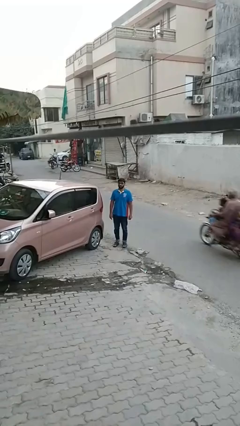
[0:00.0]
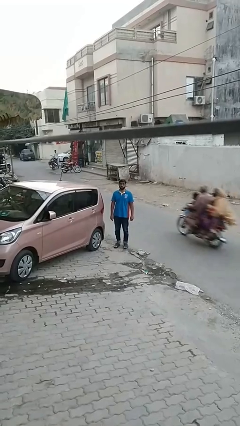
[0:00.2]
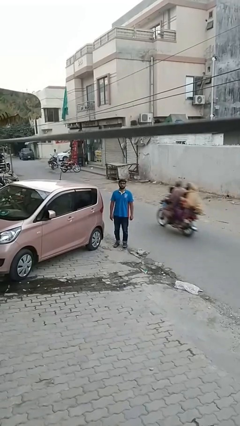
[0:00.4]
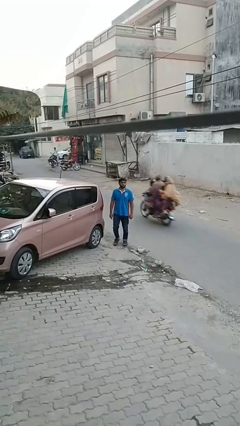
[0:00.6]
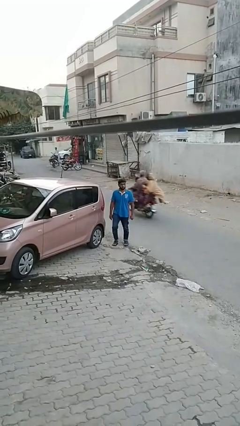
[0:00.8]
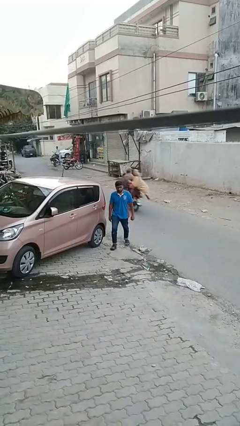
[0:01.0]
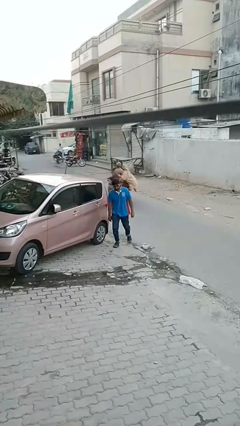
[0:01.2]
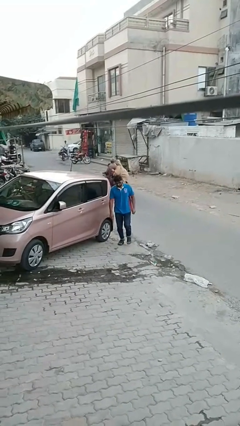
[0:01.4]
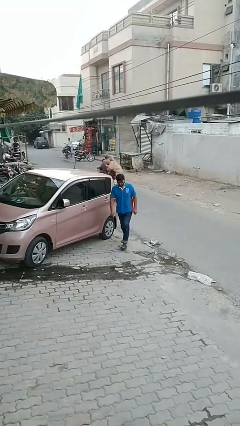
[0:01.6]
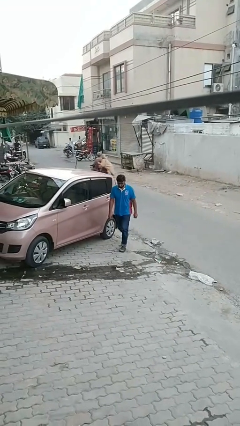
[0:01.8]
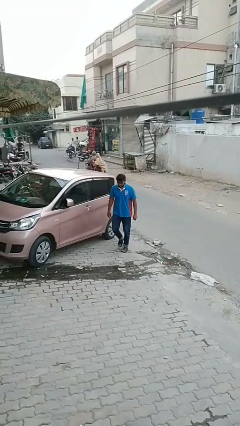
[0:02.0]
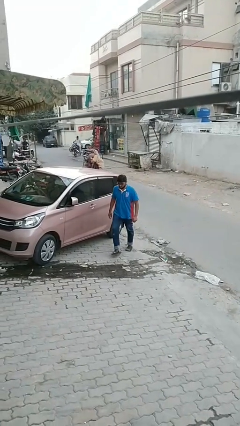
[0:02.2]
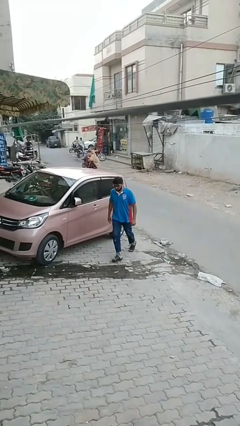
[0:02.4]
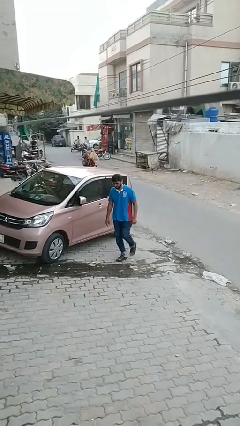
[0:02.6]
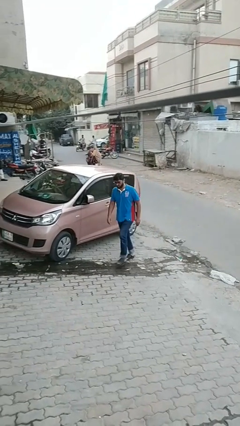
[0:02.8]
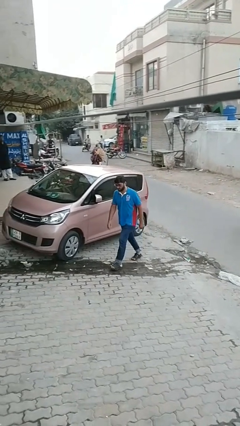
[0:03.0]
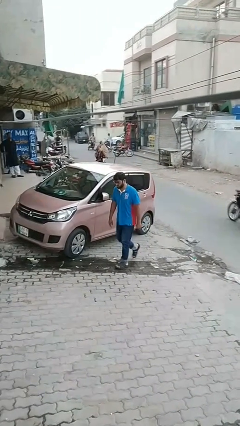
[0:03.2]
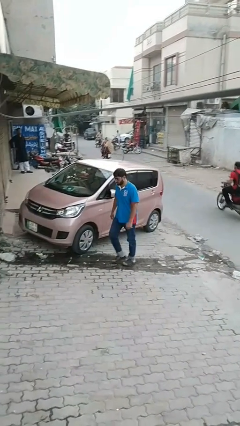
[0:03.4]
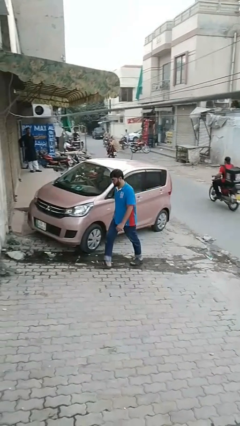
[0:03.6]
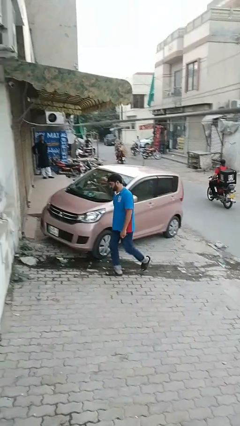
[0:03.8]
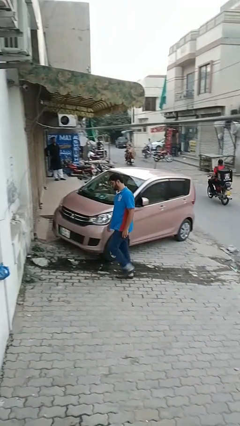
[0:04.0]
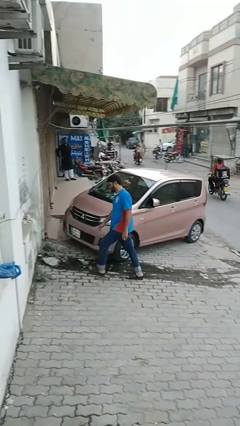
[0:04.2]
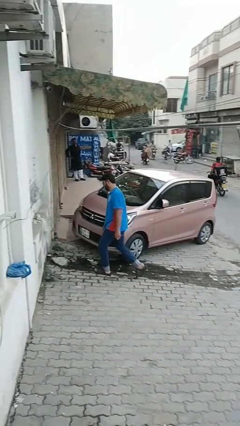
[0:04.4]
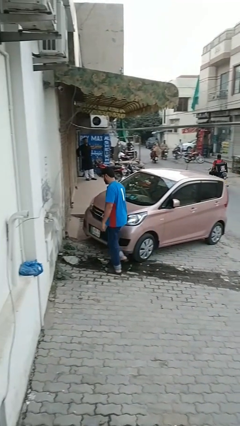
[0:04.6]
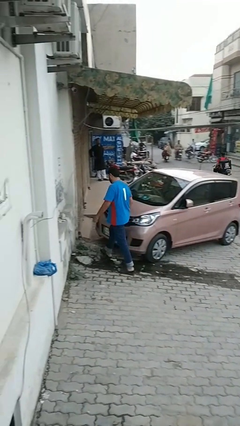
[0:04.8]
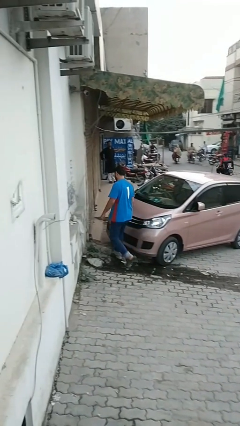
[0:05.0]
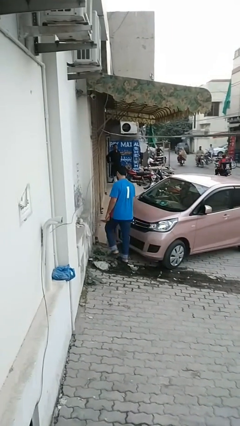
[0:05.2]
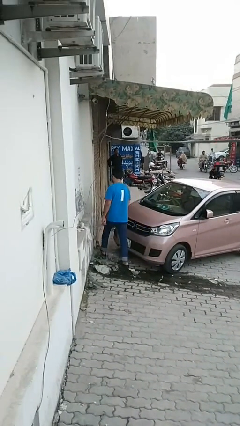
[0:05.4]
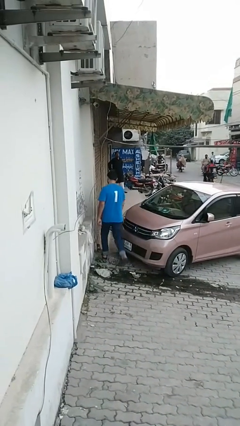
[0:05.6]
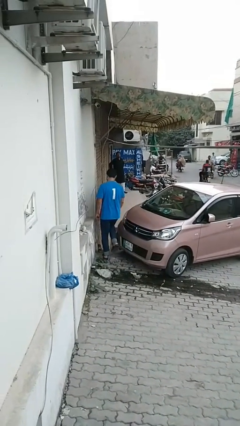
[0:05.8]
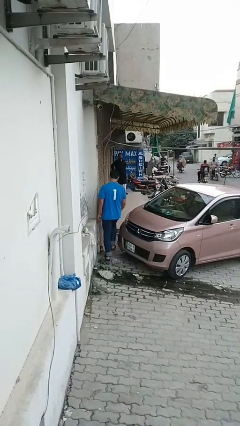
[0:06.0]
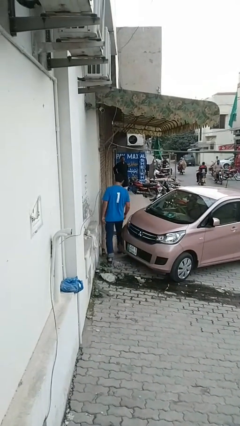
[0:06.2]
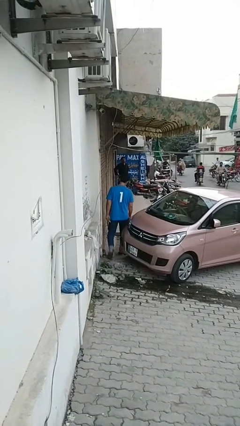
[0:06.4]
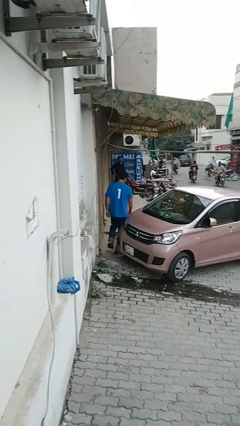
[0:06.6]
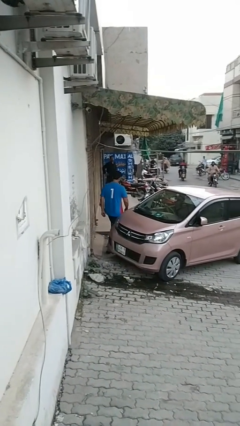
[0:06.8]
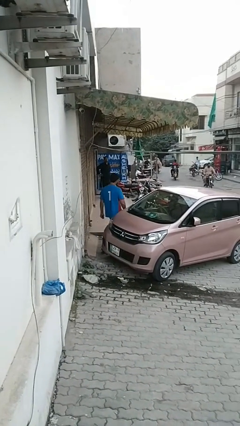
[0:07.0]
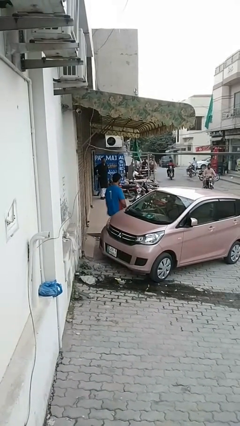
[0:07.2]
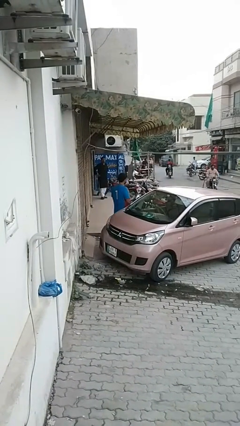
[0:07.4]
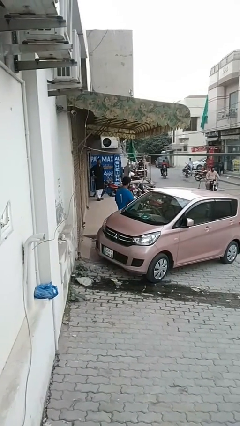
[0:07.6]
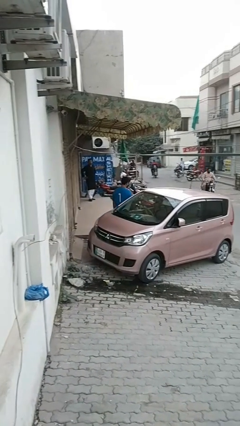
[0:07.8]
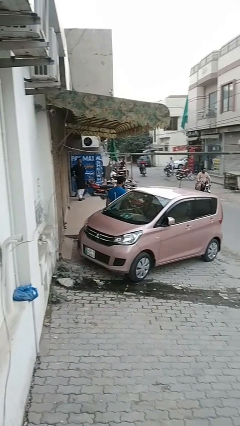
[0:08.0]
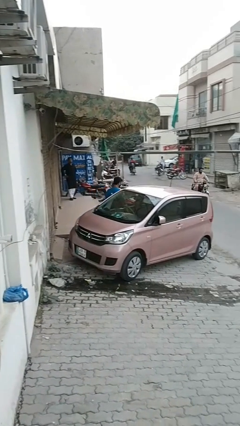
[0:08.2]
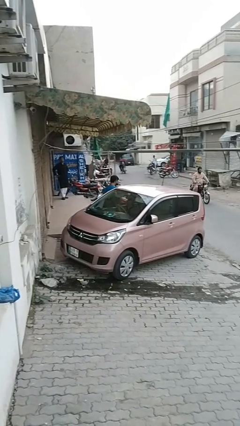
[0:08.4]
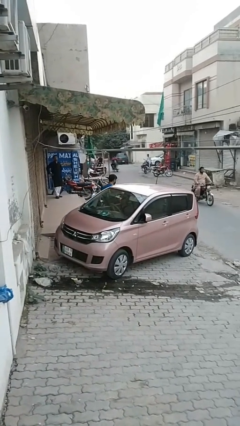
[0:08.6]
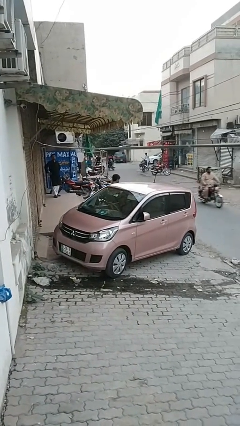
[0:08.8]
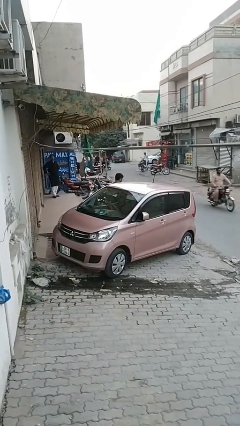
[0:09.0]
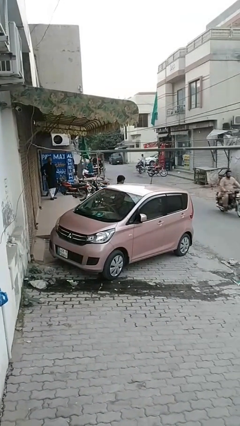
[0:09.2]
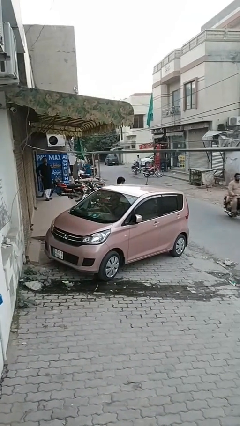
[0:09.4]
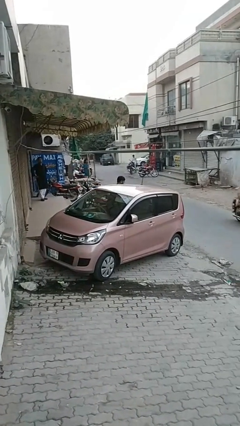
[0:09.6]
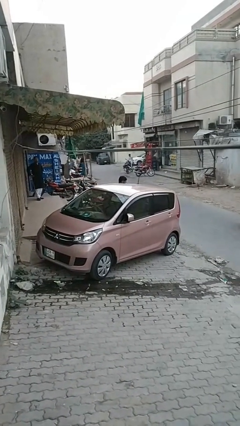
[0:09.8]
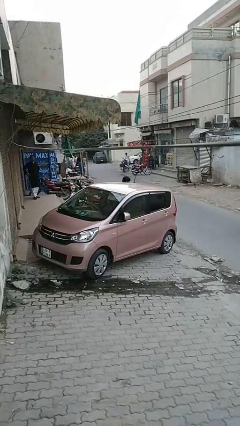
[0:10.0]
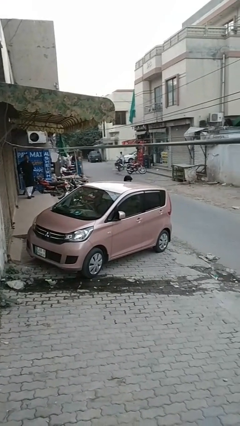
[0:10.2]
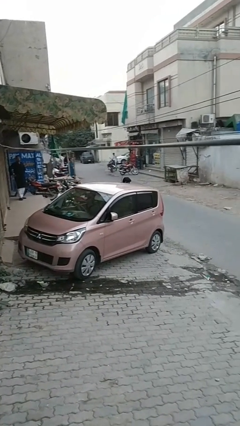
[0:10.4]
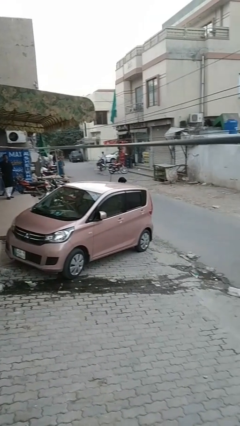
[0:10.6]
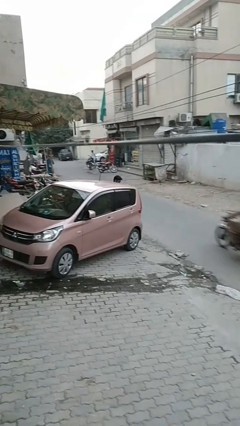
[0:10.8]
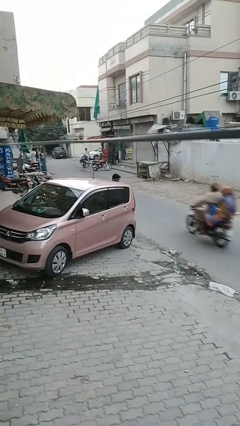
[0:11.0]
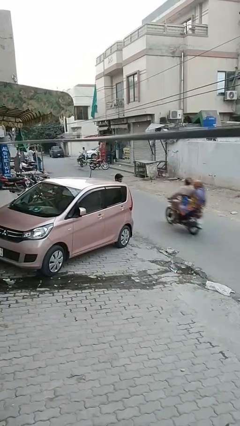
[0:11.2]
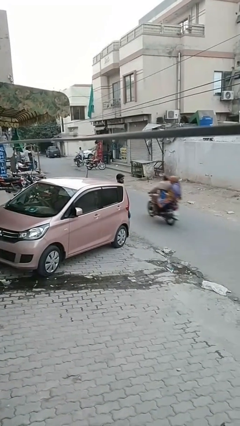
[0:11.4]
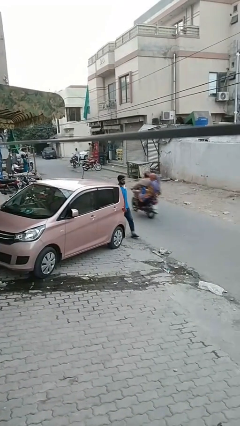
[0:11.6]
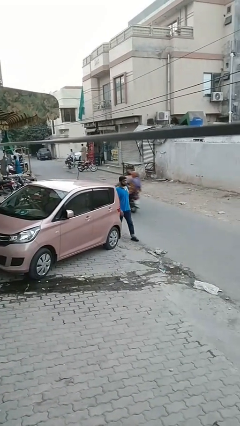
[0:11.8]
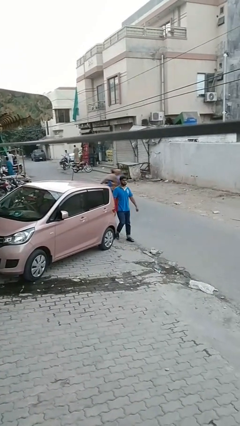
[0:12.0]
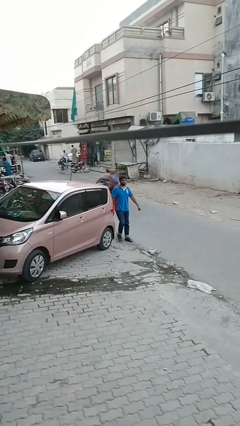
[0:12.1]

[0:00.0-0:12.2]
person walks around car

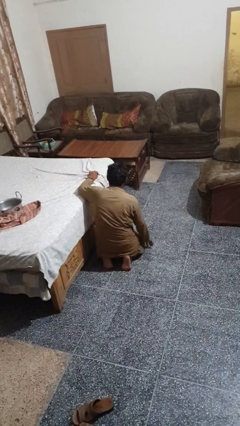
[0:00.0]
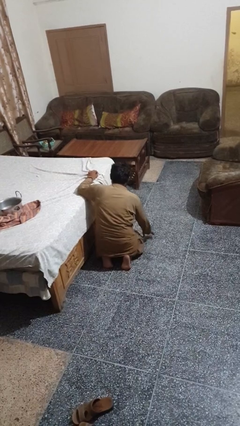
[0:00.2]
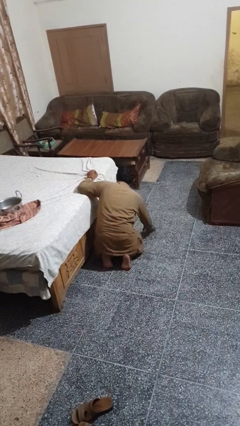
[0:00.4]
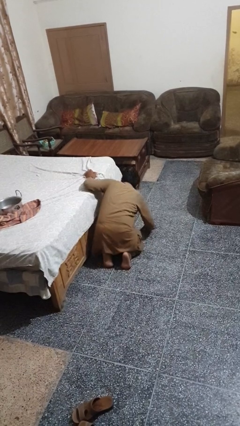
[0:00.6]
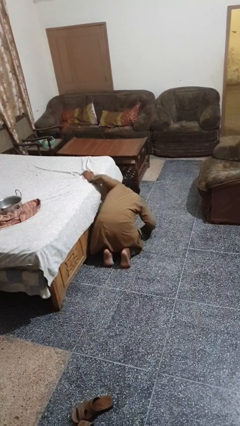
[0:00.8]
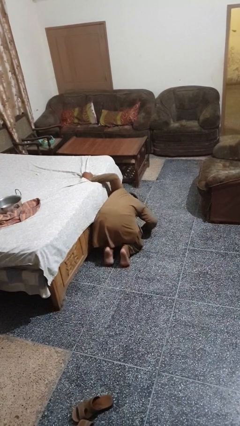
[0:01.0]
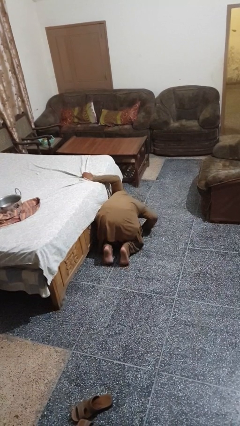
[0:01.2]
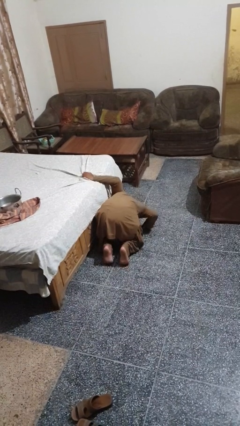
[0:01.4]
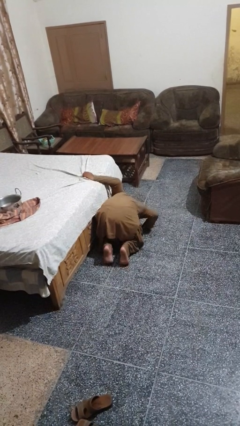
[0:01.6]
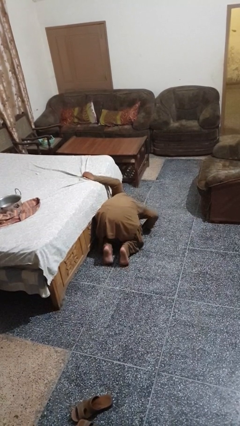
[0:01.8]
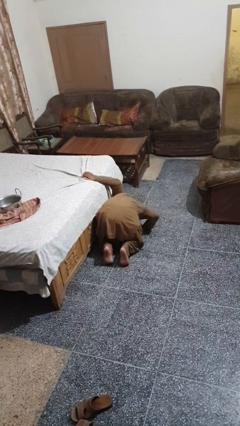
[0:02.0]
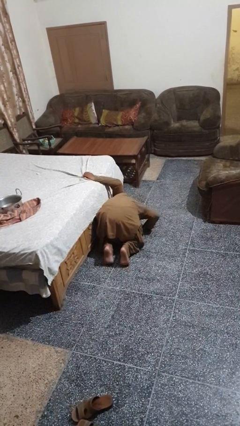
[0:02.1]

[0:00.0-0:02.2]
person searches under bed

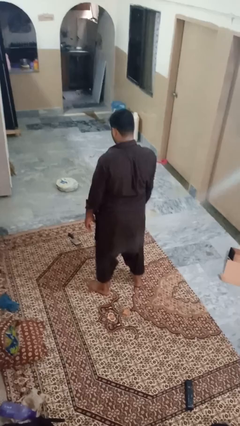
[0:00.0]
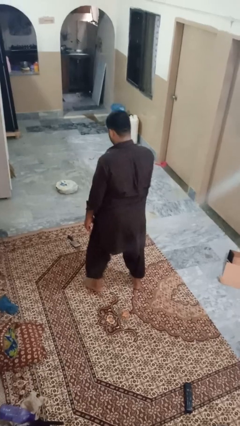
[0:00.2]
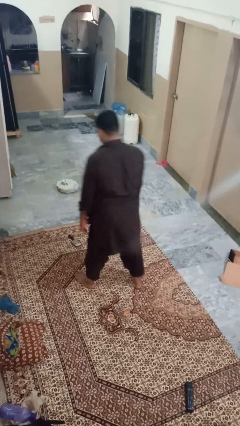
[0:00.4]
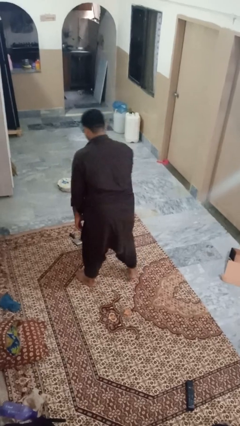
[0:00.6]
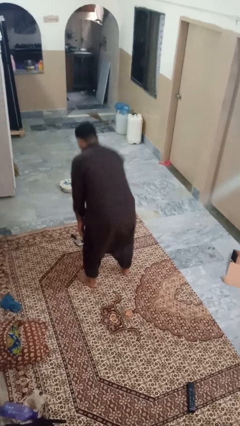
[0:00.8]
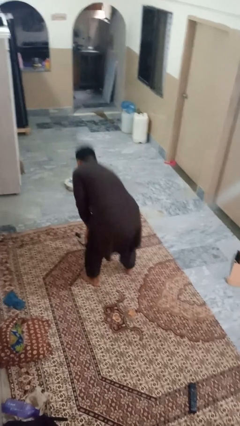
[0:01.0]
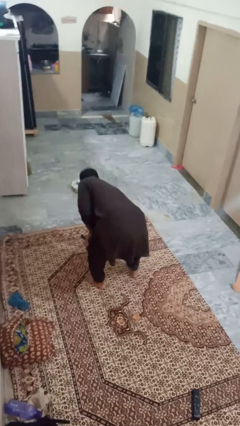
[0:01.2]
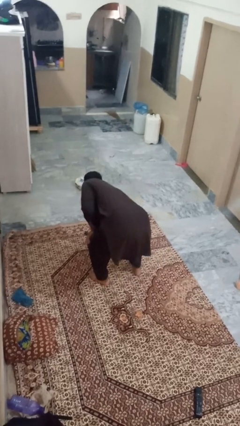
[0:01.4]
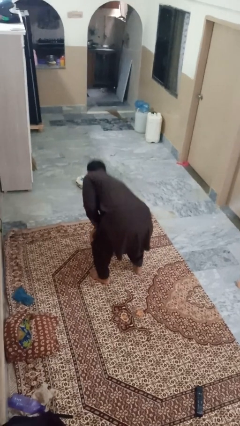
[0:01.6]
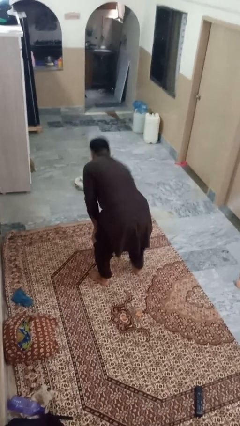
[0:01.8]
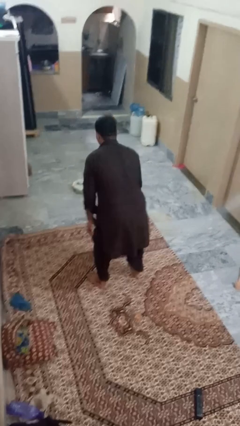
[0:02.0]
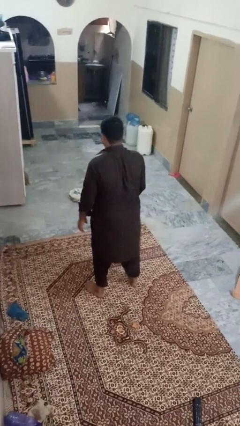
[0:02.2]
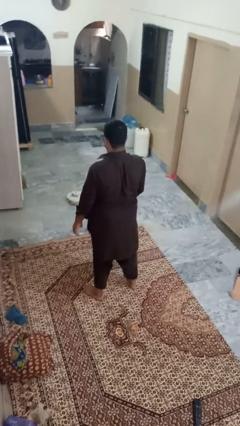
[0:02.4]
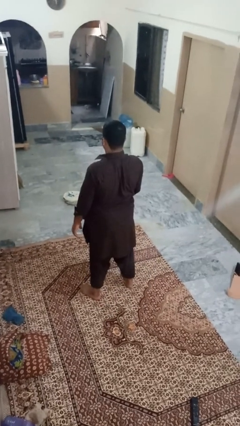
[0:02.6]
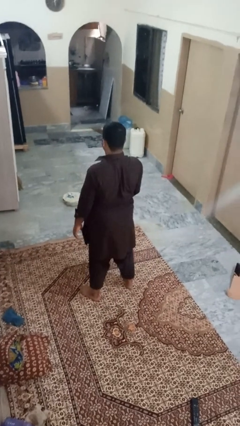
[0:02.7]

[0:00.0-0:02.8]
person picks up object from floor

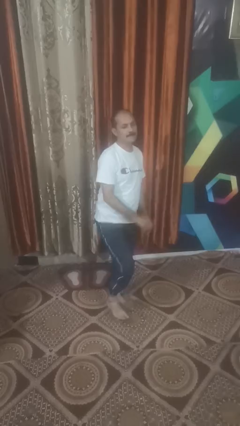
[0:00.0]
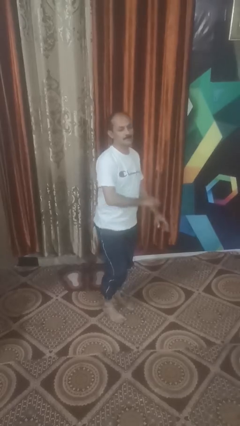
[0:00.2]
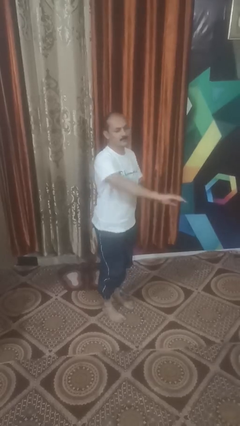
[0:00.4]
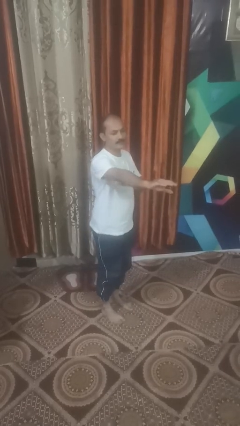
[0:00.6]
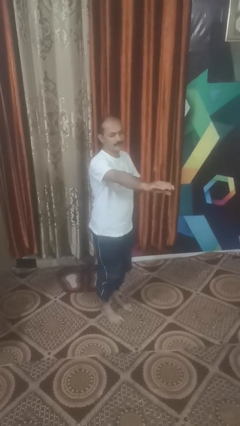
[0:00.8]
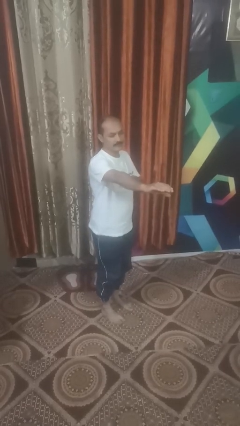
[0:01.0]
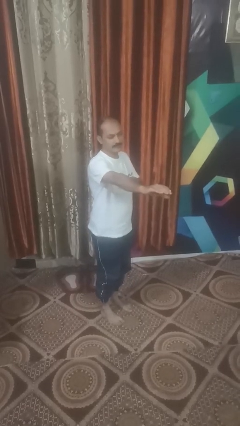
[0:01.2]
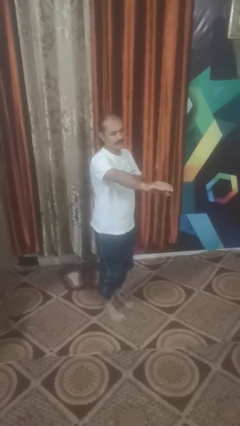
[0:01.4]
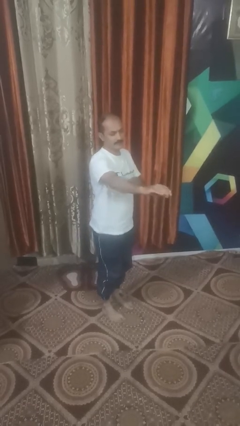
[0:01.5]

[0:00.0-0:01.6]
person karate chop
